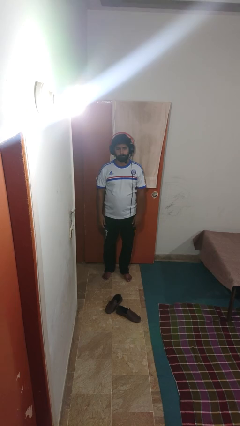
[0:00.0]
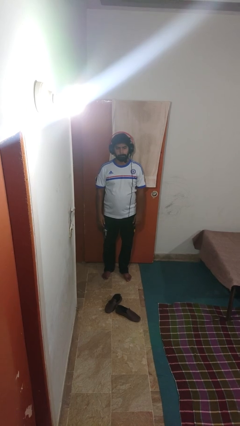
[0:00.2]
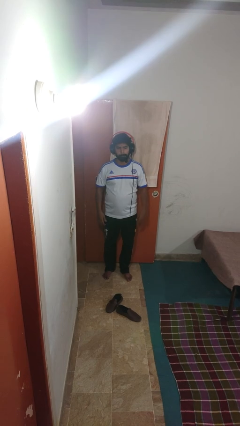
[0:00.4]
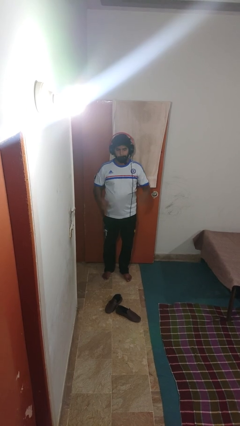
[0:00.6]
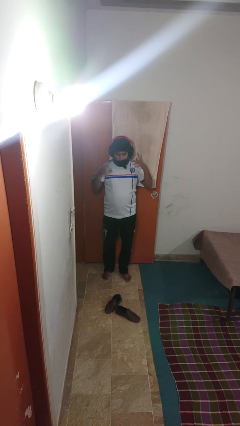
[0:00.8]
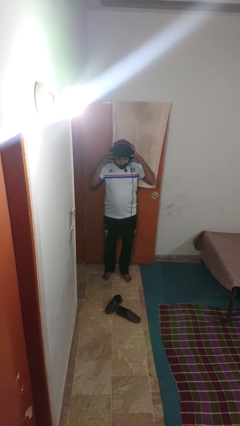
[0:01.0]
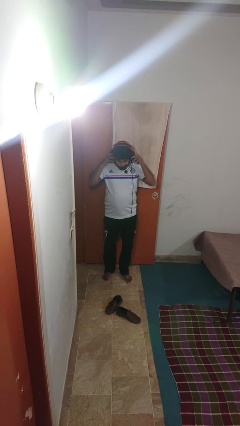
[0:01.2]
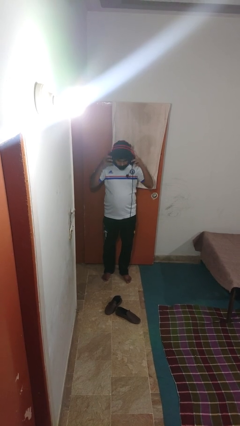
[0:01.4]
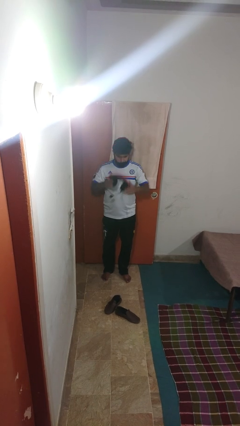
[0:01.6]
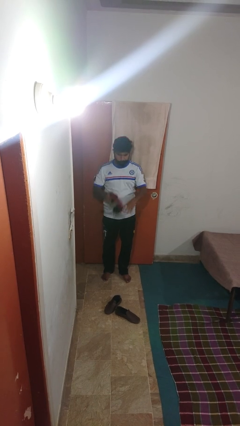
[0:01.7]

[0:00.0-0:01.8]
person takes off headphones

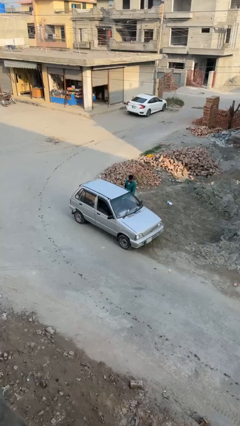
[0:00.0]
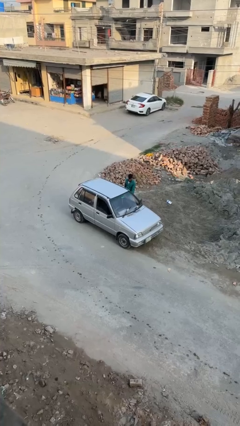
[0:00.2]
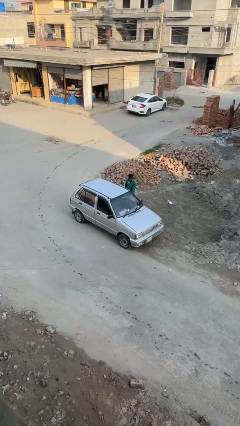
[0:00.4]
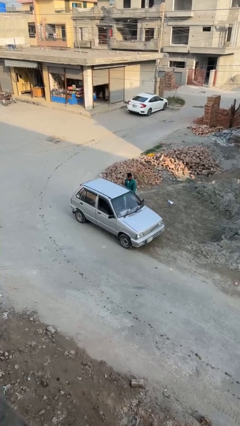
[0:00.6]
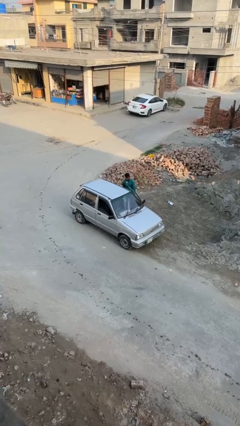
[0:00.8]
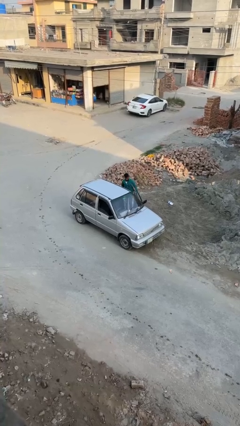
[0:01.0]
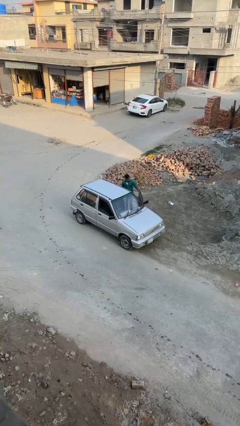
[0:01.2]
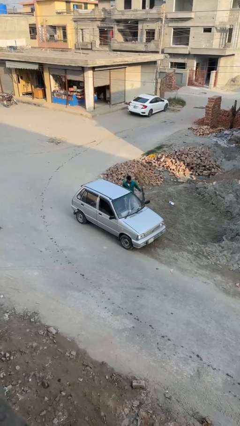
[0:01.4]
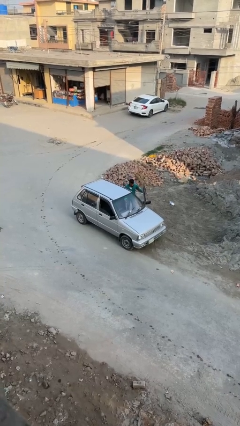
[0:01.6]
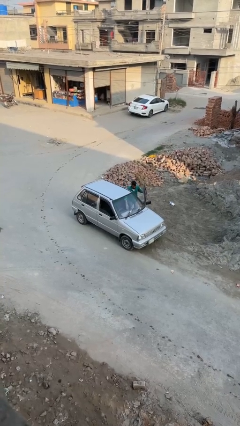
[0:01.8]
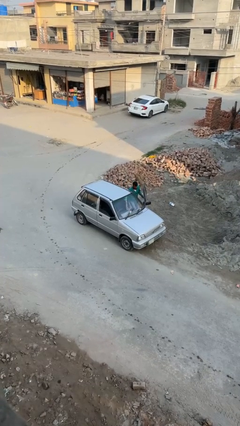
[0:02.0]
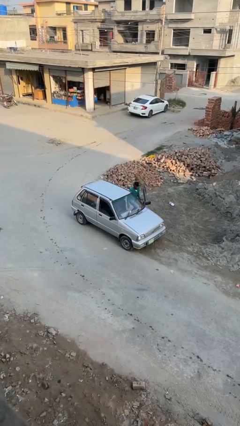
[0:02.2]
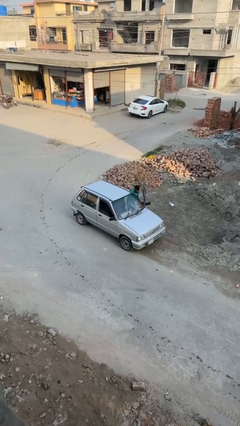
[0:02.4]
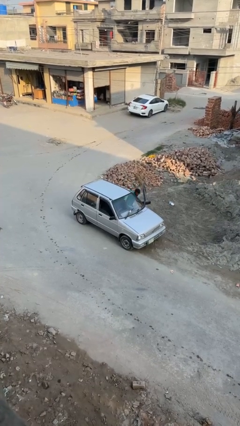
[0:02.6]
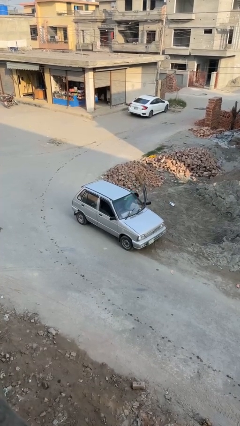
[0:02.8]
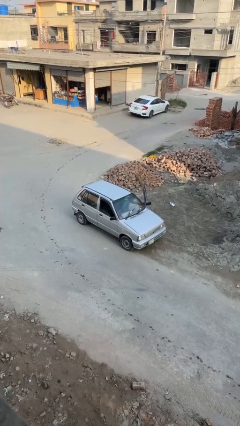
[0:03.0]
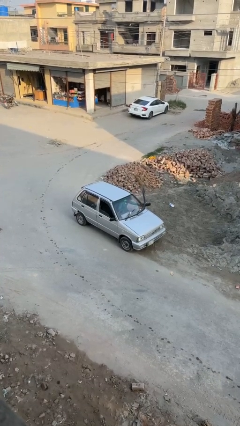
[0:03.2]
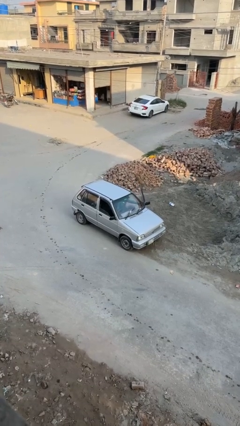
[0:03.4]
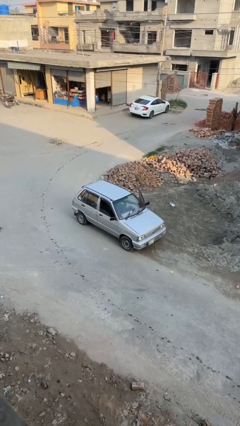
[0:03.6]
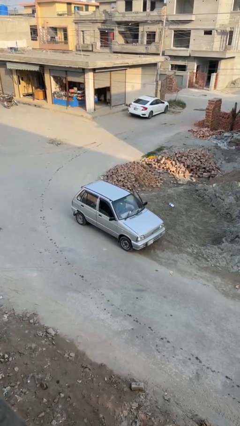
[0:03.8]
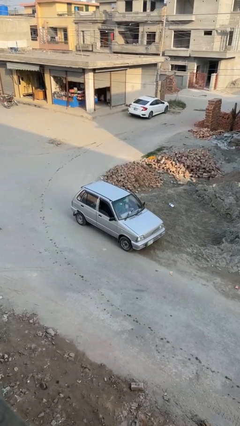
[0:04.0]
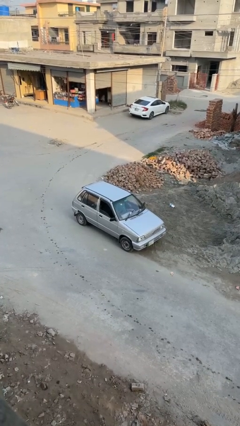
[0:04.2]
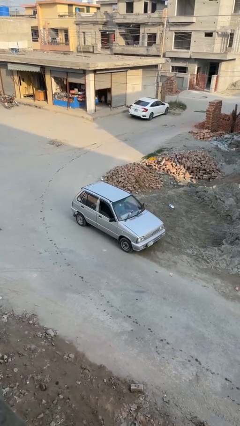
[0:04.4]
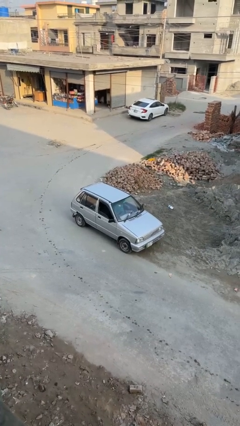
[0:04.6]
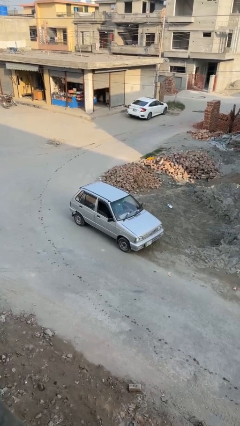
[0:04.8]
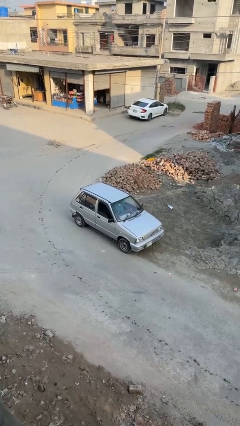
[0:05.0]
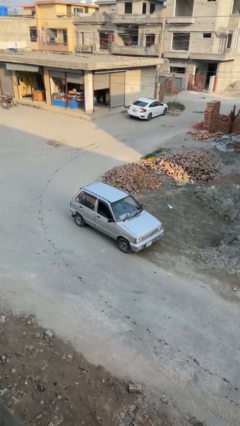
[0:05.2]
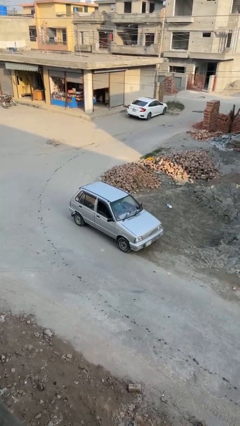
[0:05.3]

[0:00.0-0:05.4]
car picks up person

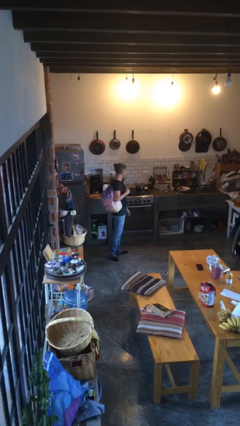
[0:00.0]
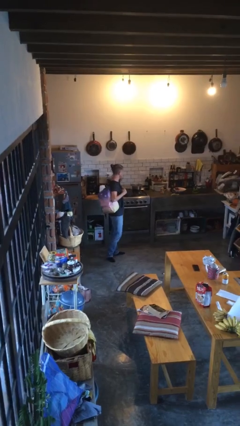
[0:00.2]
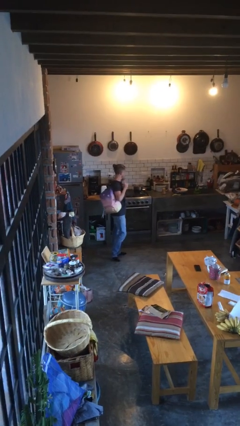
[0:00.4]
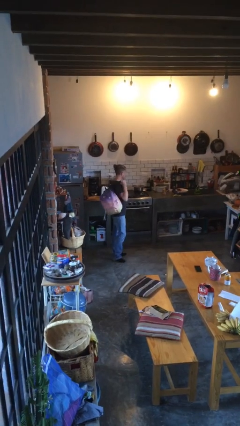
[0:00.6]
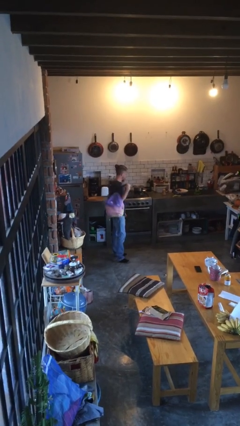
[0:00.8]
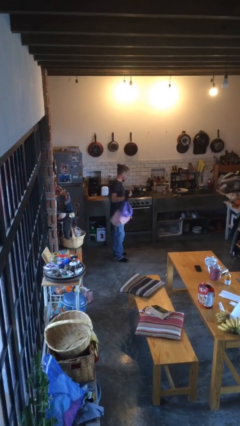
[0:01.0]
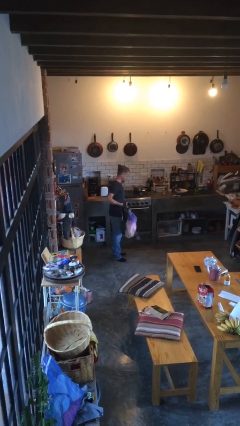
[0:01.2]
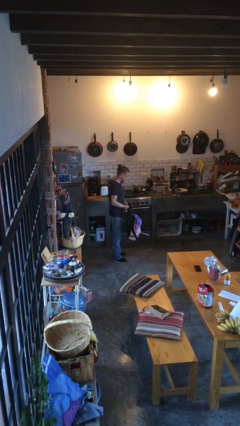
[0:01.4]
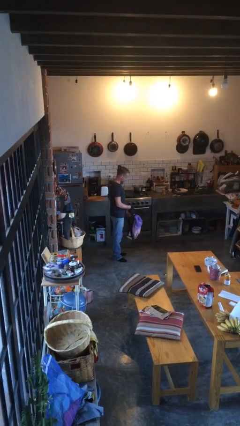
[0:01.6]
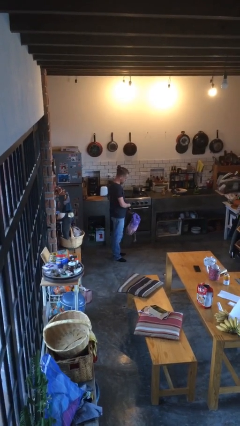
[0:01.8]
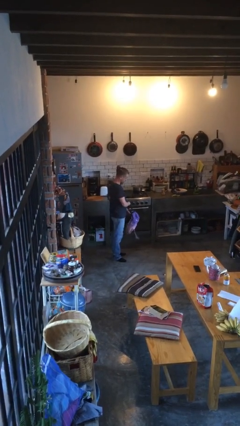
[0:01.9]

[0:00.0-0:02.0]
person takes off backpack

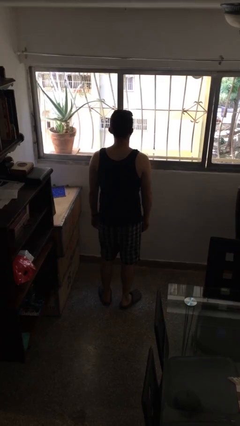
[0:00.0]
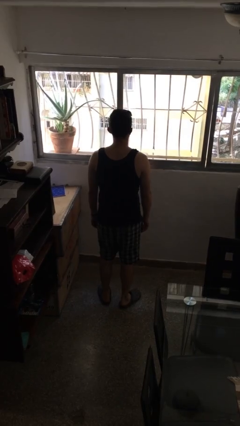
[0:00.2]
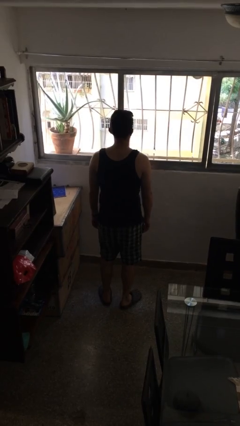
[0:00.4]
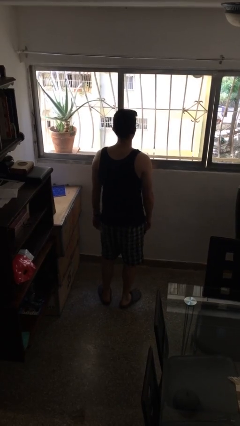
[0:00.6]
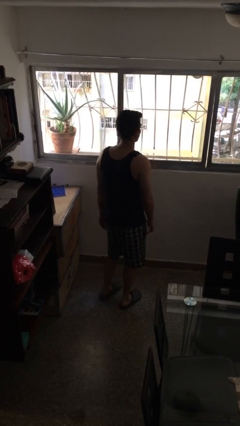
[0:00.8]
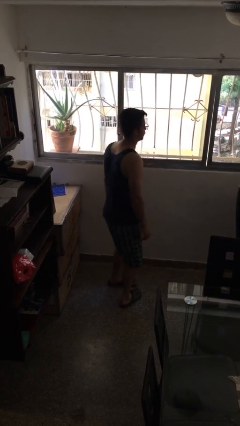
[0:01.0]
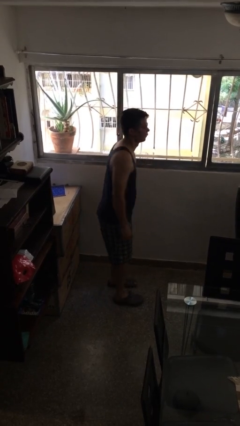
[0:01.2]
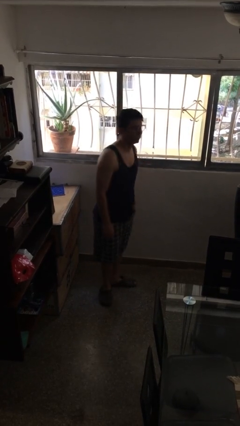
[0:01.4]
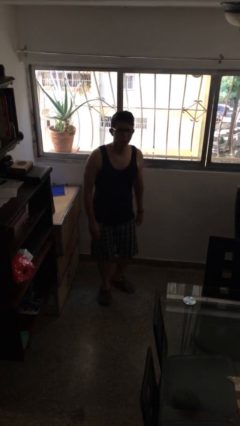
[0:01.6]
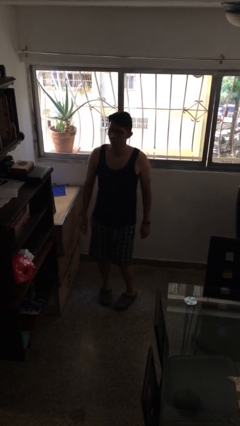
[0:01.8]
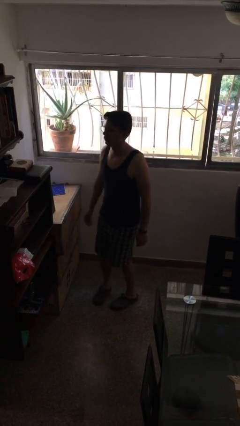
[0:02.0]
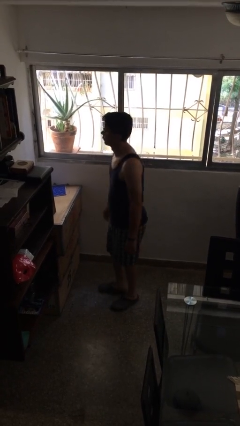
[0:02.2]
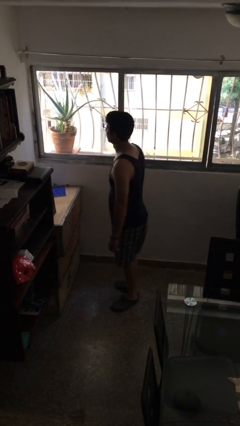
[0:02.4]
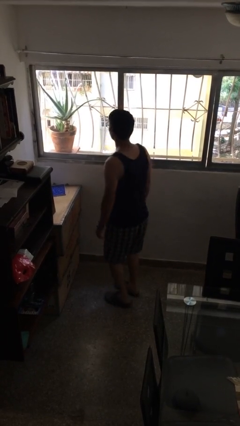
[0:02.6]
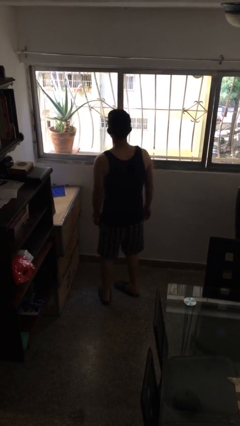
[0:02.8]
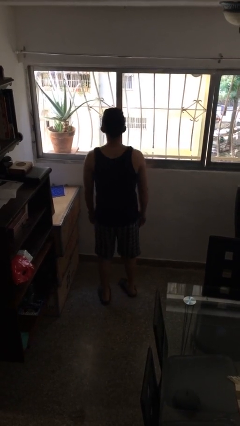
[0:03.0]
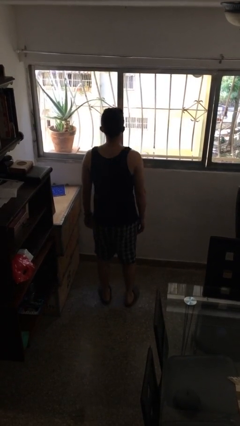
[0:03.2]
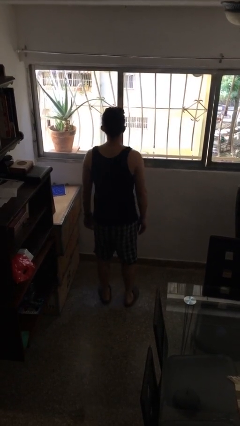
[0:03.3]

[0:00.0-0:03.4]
person twirls

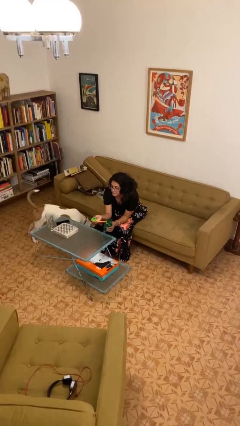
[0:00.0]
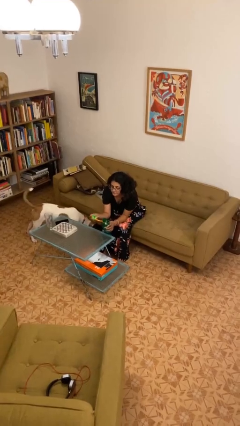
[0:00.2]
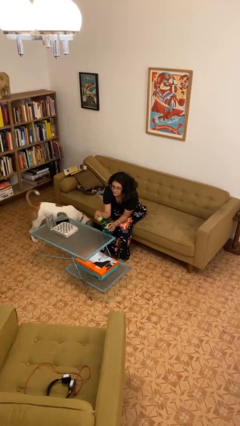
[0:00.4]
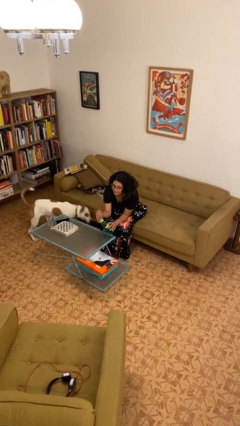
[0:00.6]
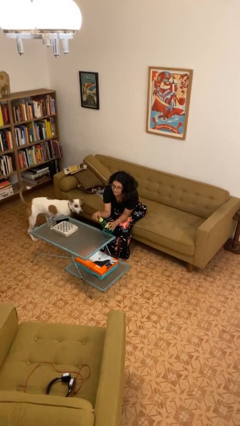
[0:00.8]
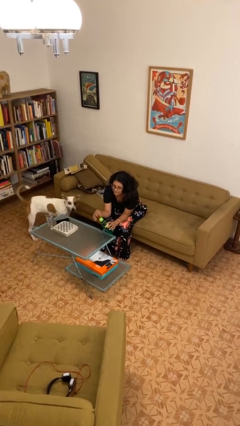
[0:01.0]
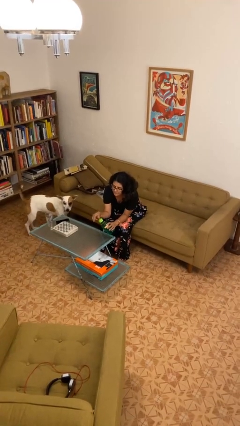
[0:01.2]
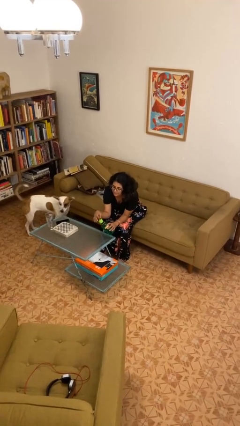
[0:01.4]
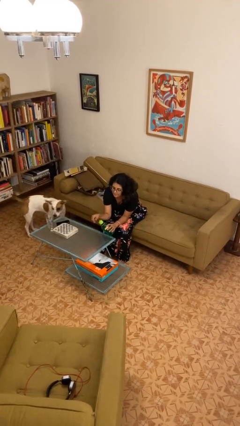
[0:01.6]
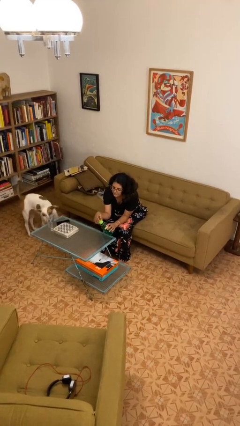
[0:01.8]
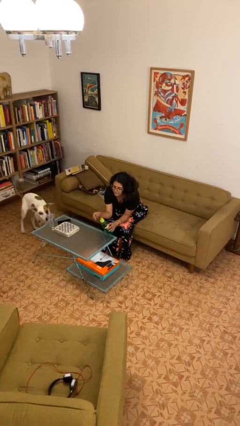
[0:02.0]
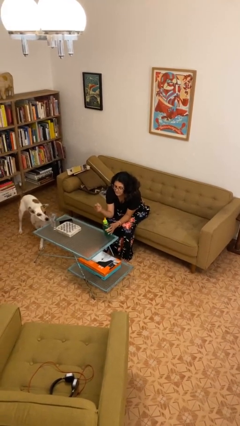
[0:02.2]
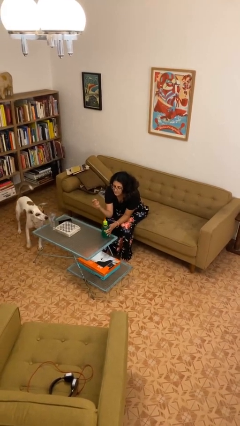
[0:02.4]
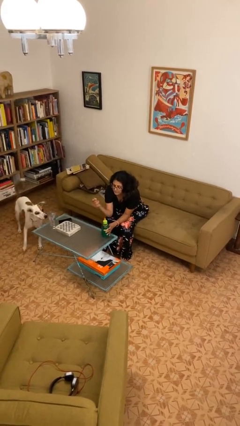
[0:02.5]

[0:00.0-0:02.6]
person screws lid to bottle

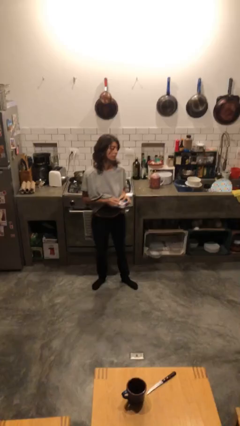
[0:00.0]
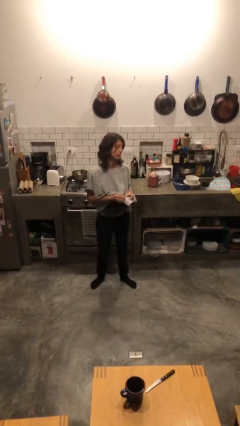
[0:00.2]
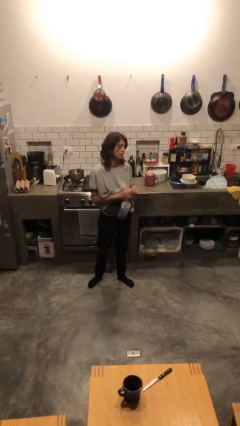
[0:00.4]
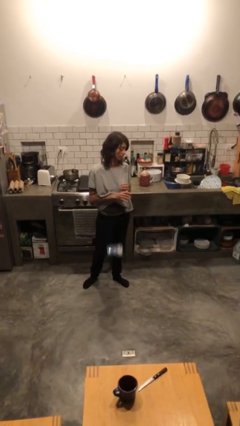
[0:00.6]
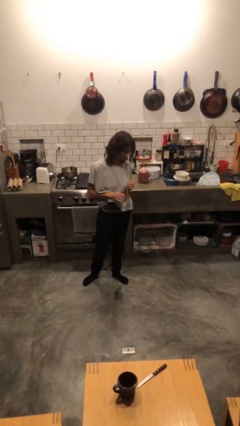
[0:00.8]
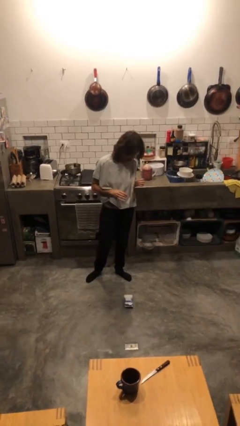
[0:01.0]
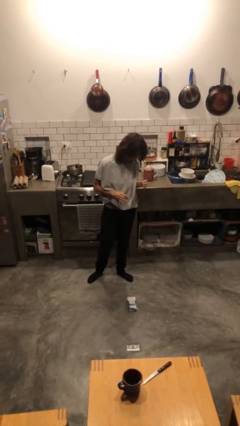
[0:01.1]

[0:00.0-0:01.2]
person drops object

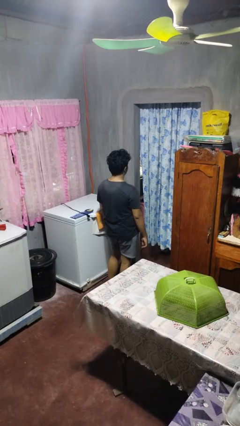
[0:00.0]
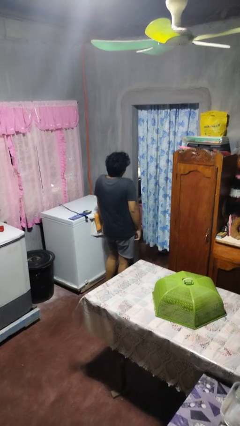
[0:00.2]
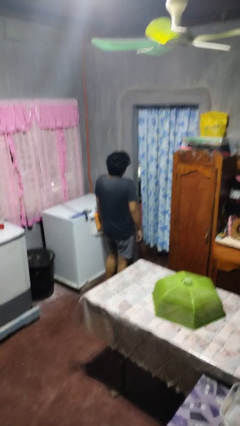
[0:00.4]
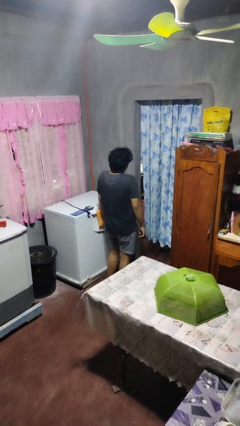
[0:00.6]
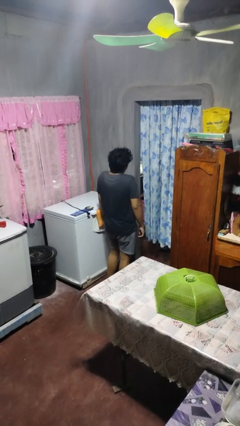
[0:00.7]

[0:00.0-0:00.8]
person shrugs

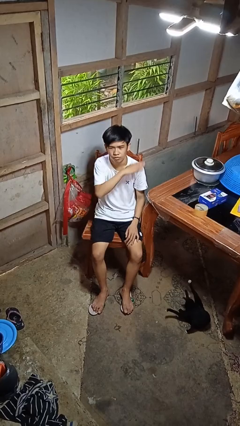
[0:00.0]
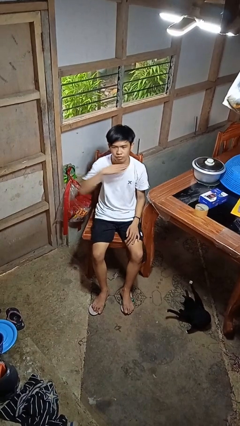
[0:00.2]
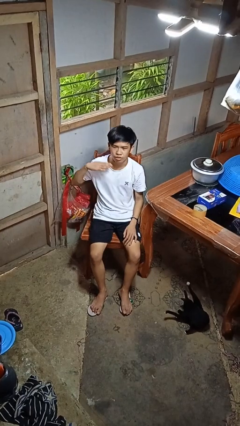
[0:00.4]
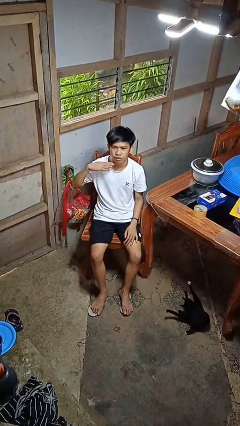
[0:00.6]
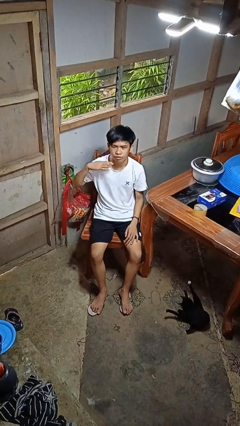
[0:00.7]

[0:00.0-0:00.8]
person gestures cut
